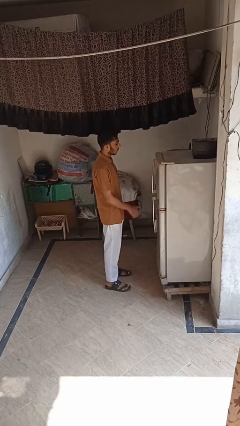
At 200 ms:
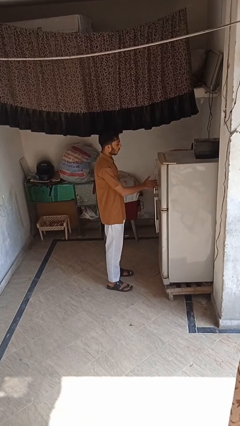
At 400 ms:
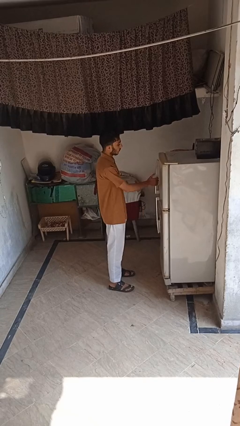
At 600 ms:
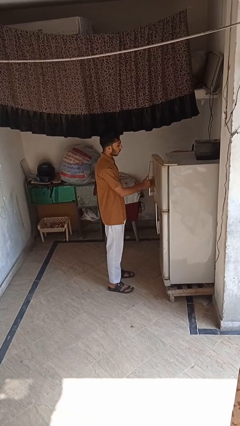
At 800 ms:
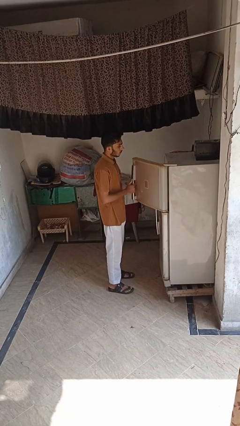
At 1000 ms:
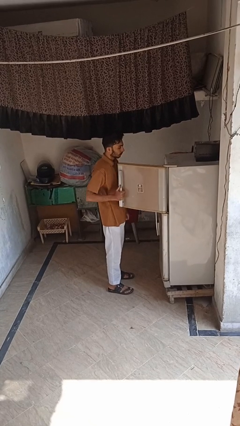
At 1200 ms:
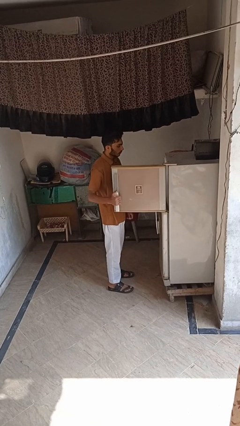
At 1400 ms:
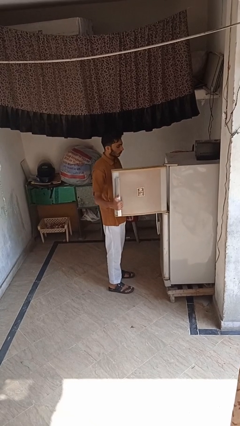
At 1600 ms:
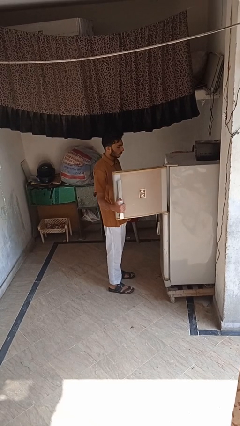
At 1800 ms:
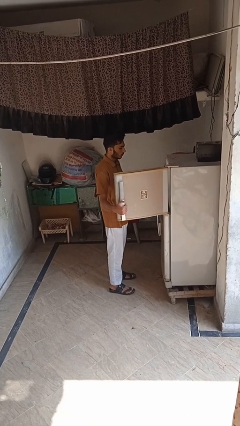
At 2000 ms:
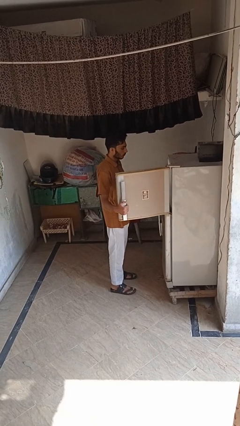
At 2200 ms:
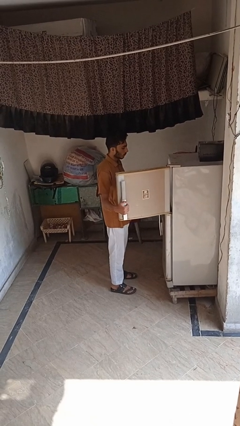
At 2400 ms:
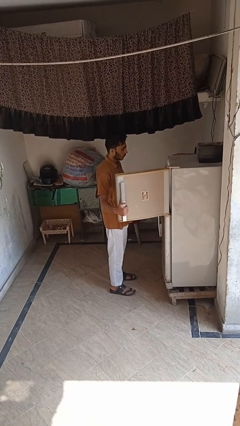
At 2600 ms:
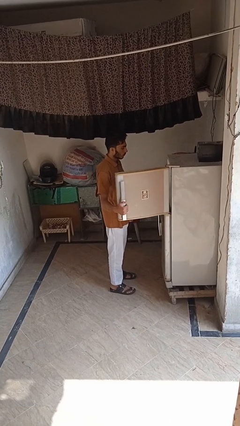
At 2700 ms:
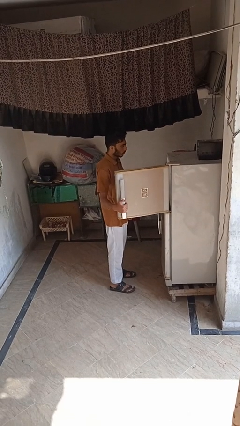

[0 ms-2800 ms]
person opens refrigerator

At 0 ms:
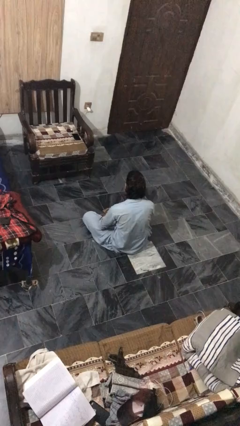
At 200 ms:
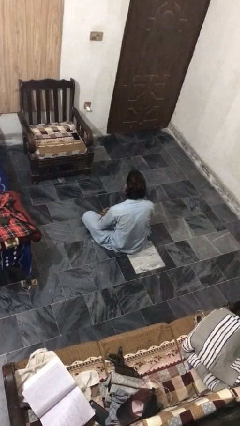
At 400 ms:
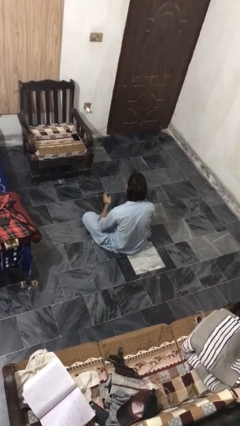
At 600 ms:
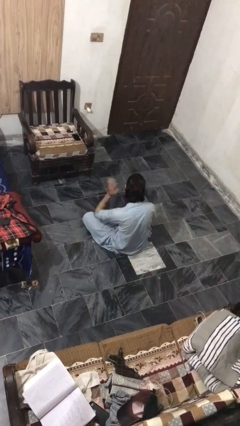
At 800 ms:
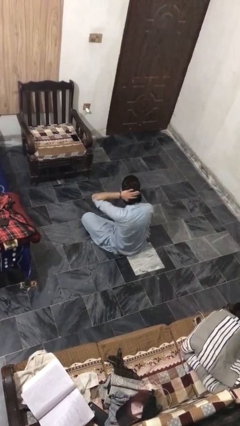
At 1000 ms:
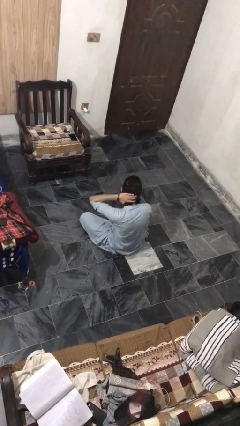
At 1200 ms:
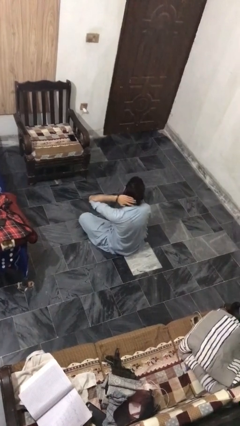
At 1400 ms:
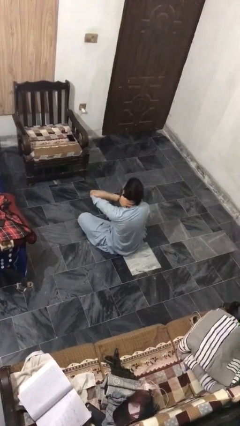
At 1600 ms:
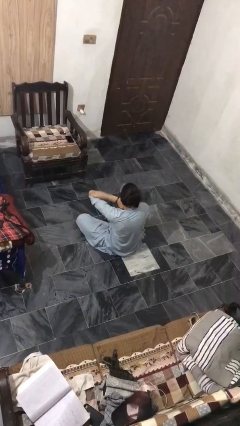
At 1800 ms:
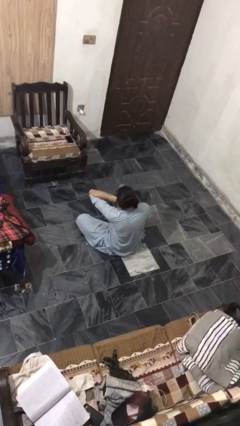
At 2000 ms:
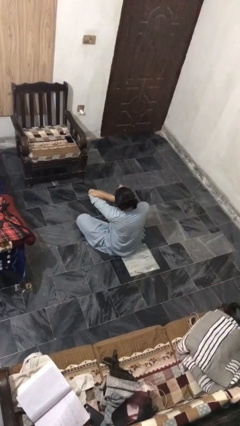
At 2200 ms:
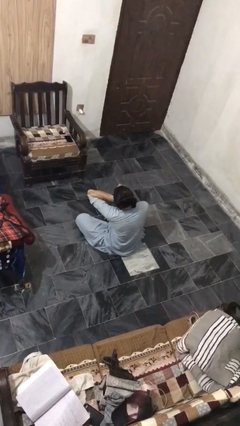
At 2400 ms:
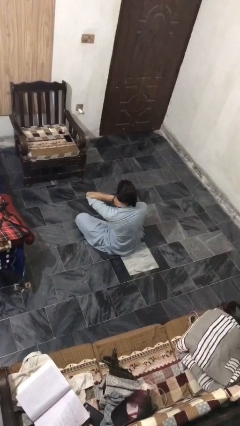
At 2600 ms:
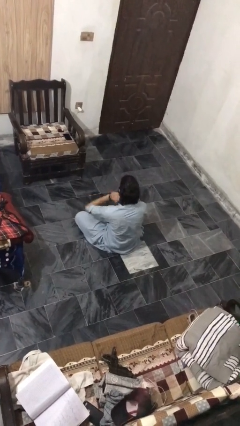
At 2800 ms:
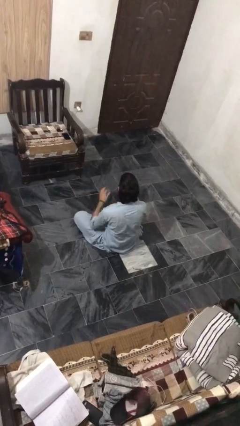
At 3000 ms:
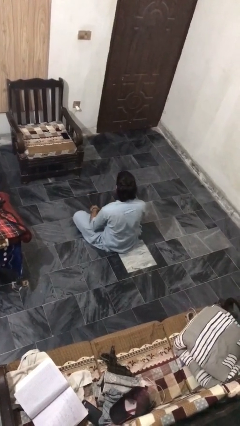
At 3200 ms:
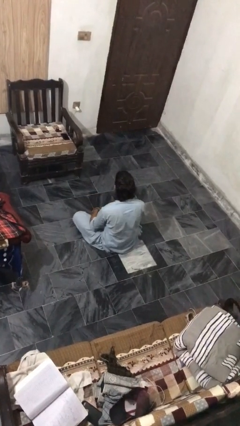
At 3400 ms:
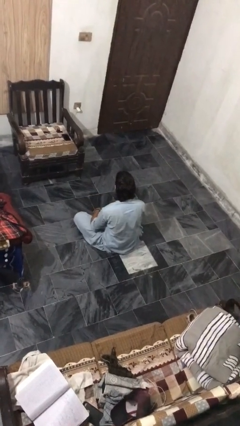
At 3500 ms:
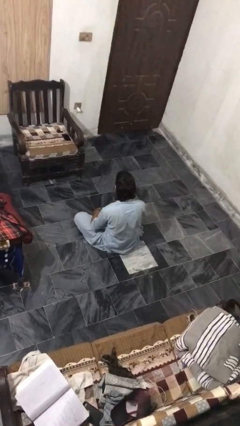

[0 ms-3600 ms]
person rubs neck

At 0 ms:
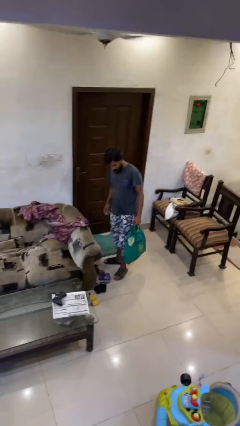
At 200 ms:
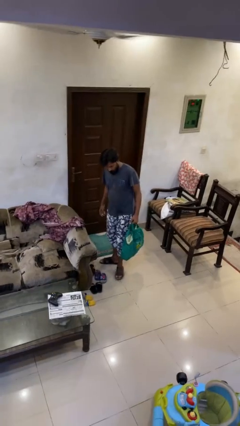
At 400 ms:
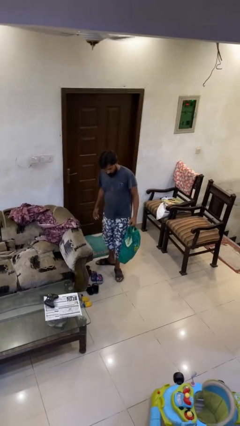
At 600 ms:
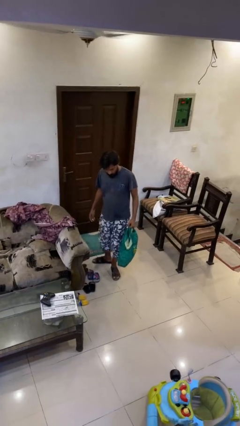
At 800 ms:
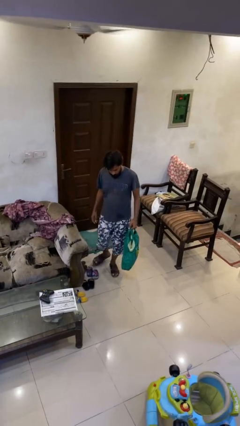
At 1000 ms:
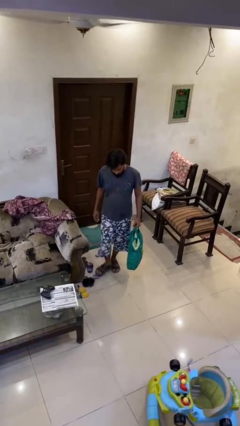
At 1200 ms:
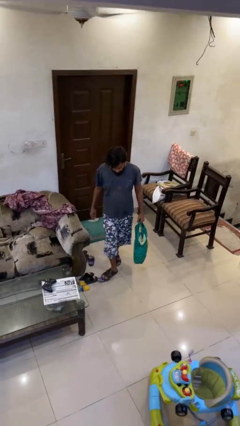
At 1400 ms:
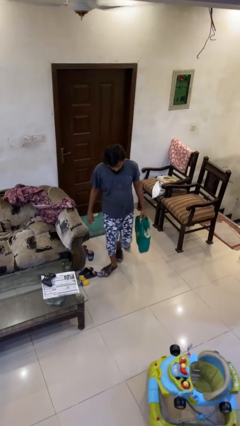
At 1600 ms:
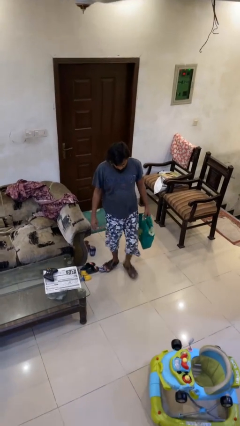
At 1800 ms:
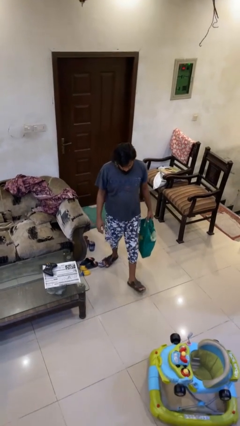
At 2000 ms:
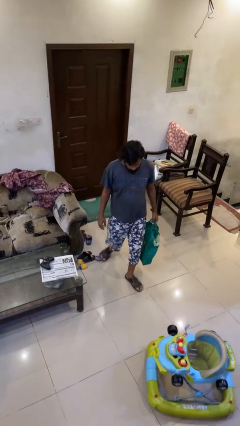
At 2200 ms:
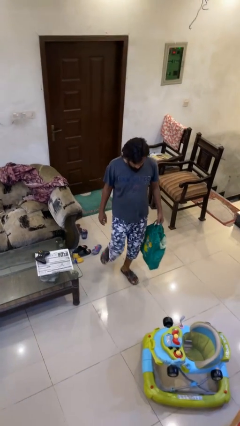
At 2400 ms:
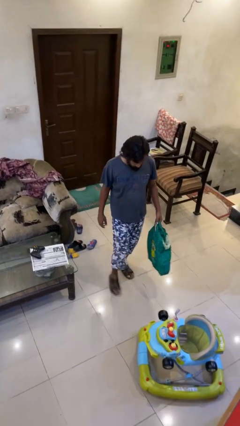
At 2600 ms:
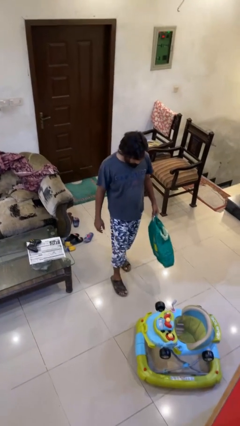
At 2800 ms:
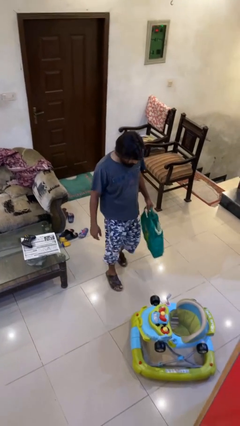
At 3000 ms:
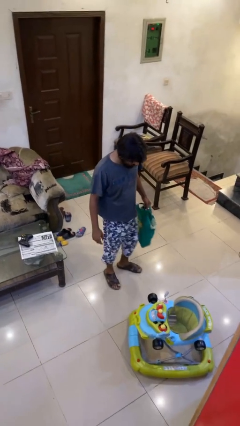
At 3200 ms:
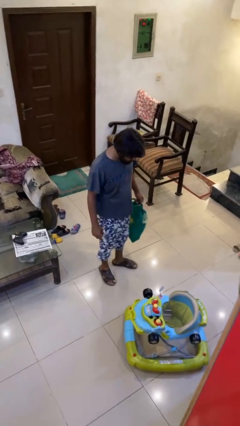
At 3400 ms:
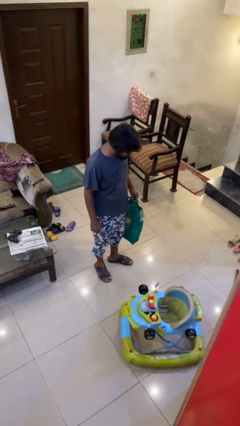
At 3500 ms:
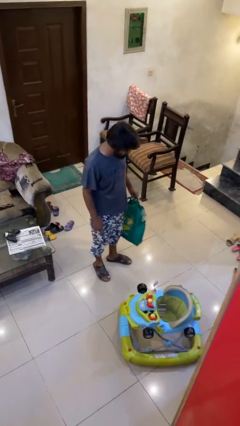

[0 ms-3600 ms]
person carries groceries

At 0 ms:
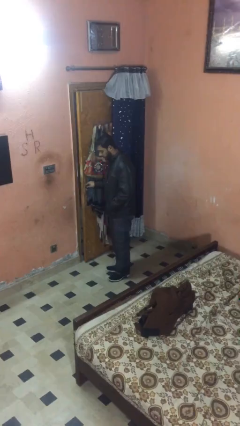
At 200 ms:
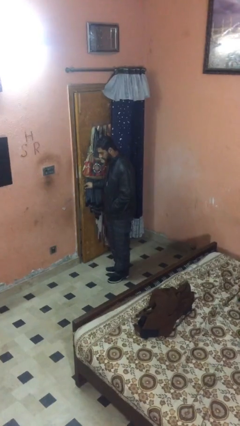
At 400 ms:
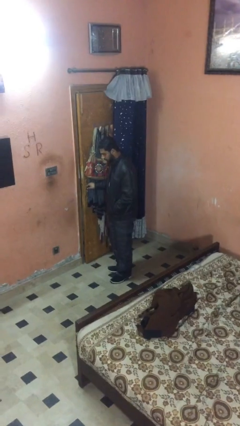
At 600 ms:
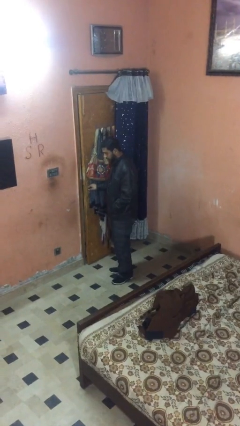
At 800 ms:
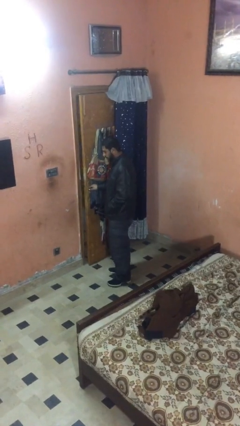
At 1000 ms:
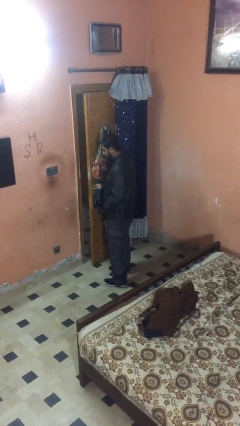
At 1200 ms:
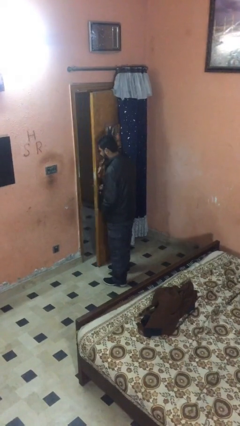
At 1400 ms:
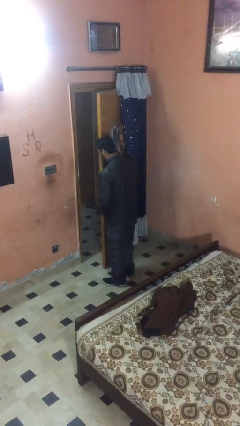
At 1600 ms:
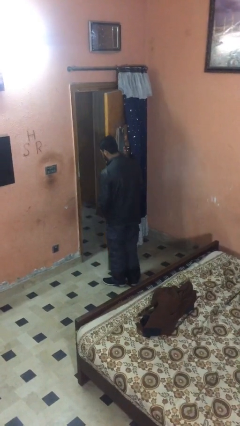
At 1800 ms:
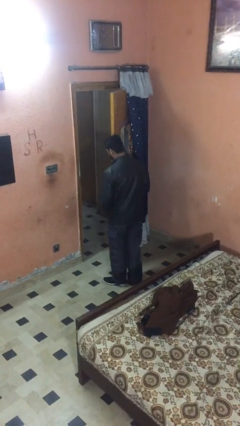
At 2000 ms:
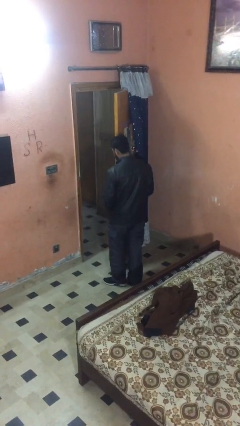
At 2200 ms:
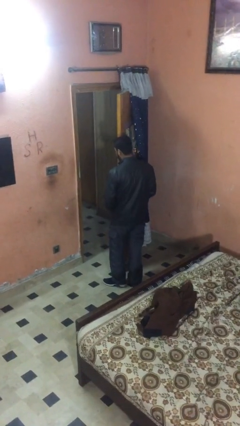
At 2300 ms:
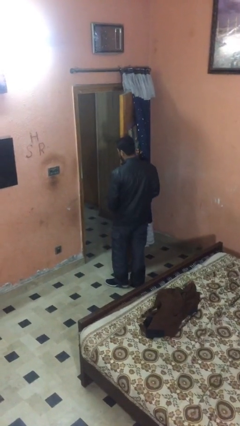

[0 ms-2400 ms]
person opens facility door

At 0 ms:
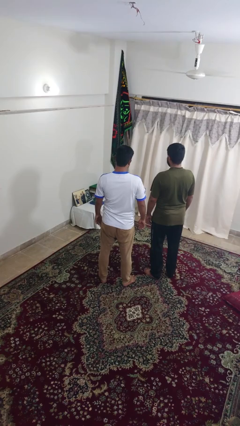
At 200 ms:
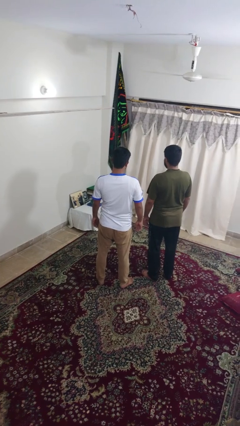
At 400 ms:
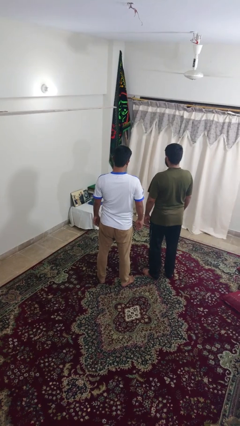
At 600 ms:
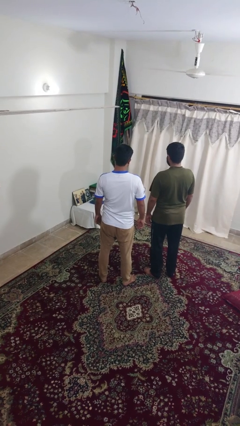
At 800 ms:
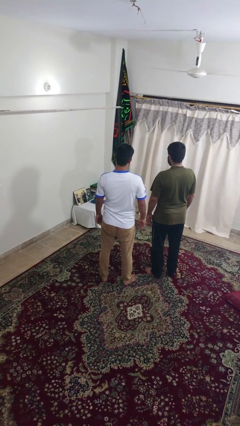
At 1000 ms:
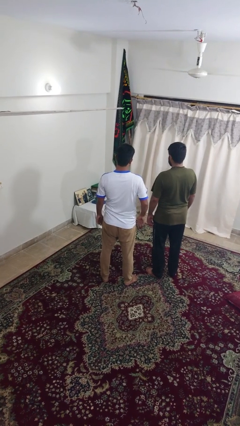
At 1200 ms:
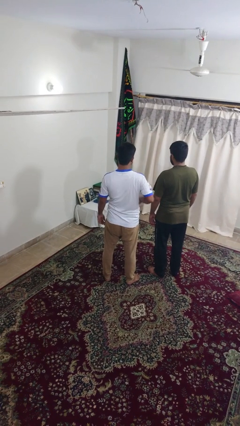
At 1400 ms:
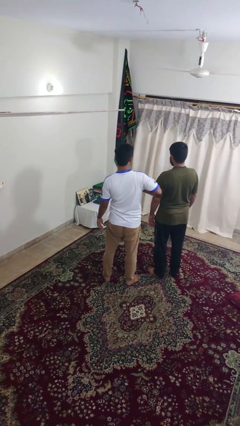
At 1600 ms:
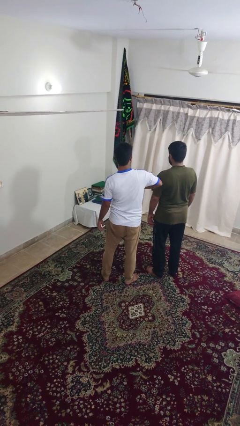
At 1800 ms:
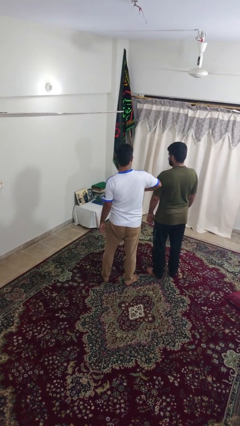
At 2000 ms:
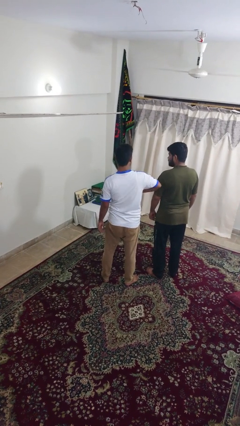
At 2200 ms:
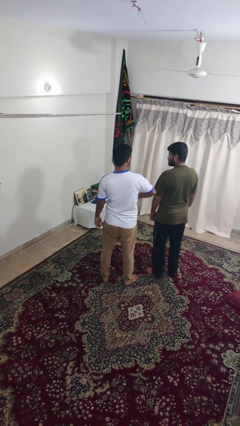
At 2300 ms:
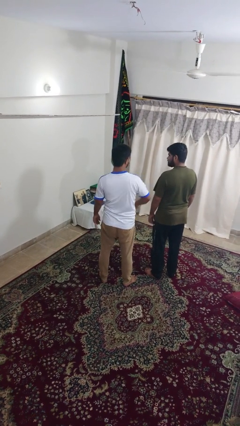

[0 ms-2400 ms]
person nudges person with elbow

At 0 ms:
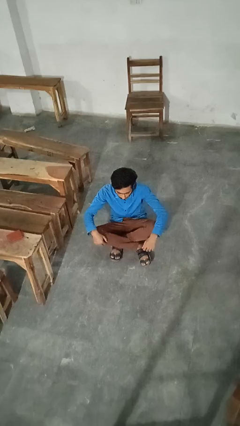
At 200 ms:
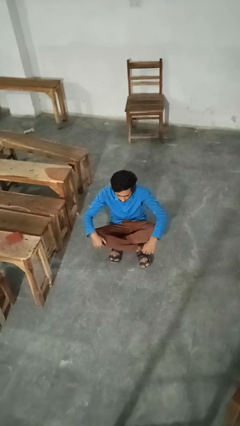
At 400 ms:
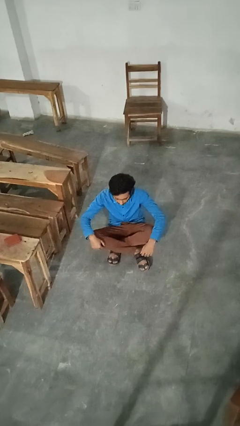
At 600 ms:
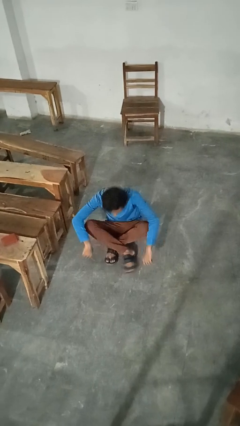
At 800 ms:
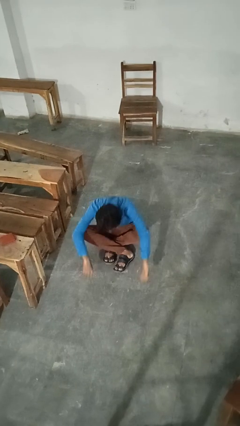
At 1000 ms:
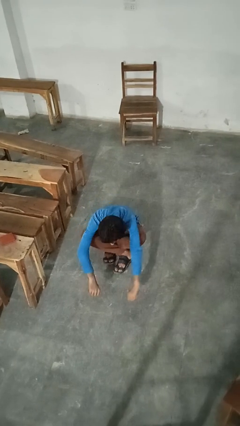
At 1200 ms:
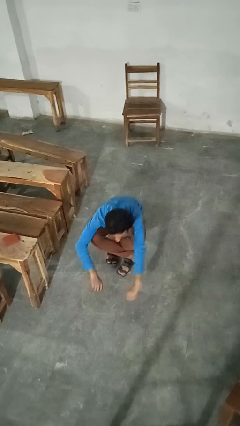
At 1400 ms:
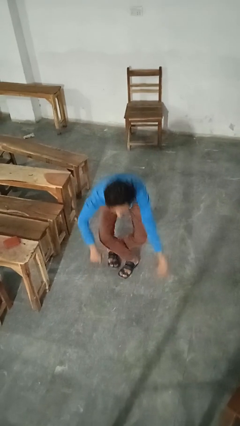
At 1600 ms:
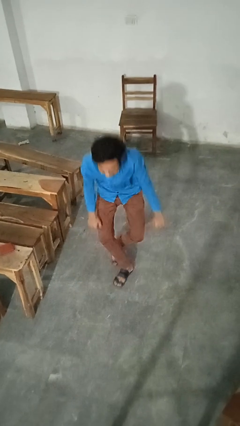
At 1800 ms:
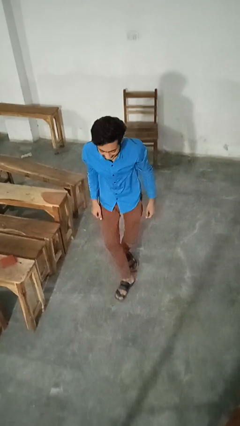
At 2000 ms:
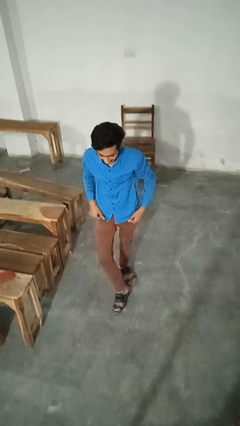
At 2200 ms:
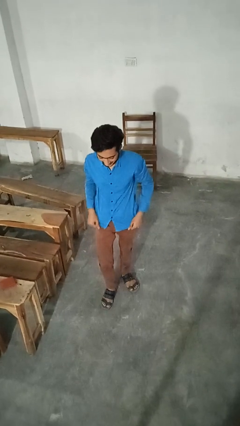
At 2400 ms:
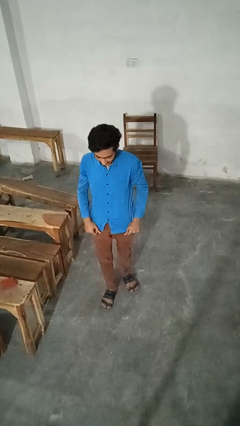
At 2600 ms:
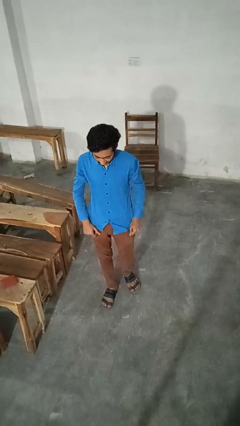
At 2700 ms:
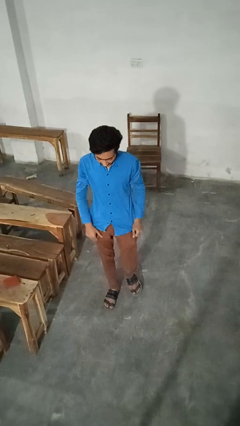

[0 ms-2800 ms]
person stands up from floor
